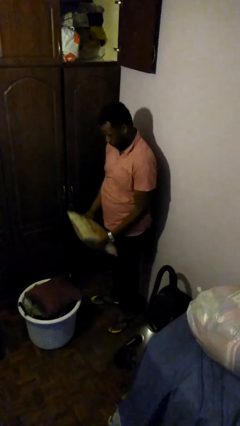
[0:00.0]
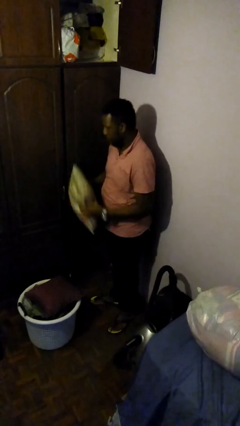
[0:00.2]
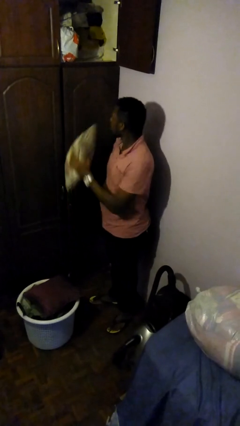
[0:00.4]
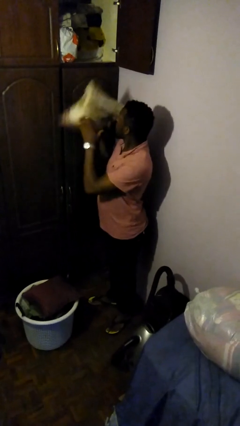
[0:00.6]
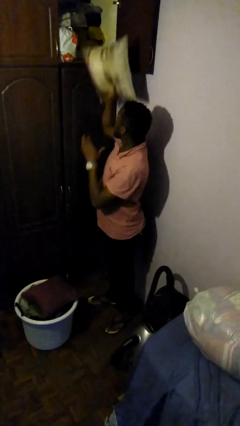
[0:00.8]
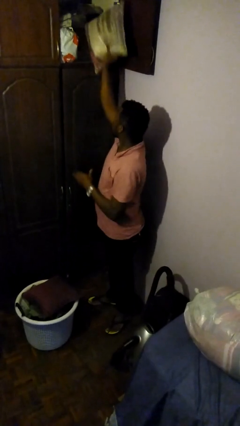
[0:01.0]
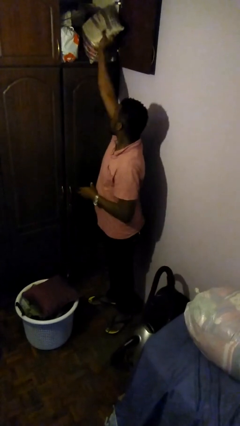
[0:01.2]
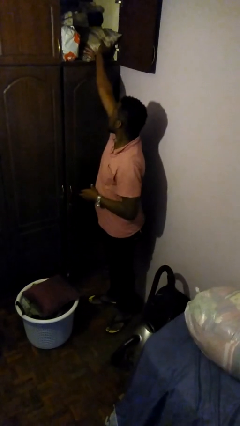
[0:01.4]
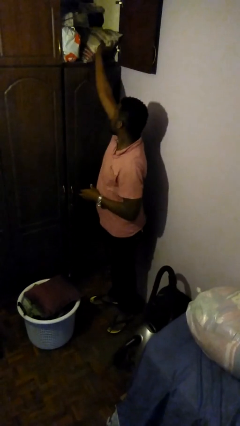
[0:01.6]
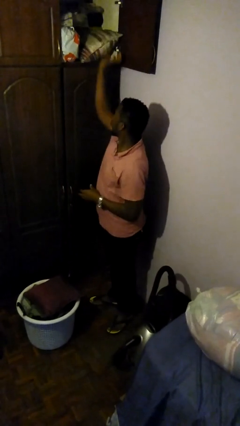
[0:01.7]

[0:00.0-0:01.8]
person puts down object on shelf

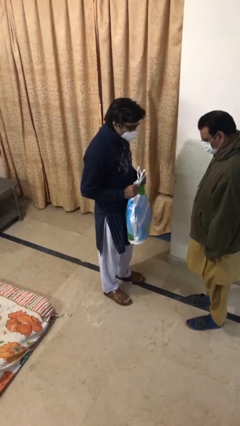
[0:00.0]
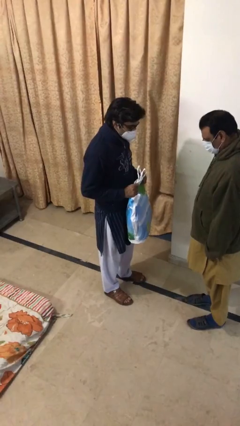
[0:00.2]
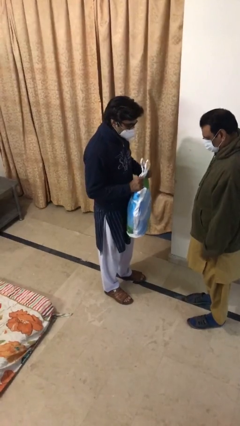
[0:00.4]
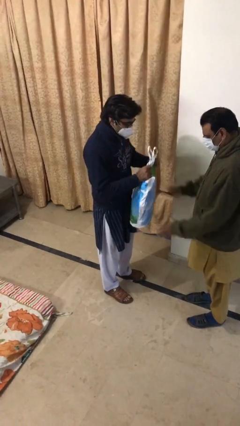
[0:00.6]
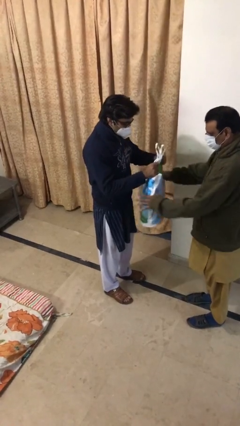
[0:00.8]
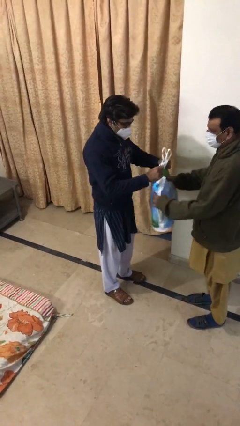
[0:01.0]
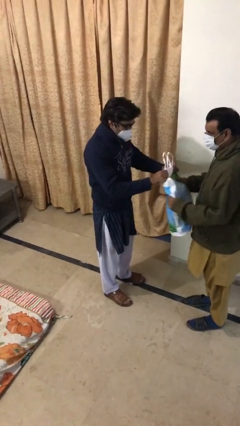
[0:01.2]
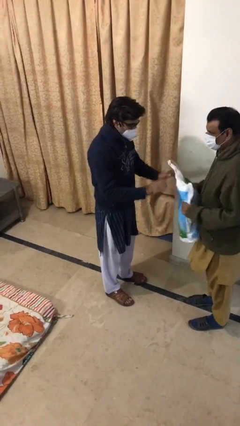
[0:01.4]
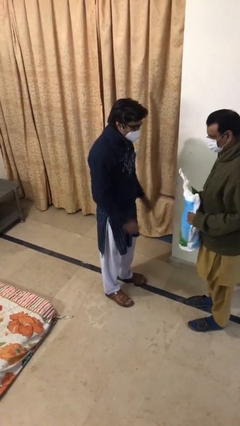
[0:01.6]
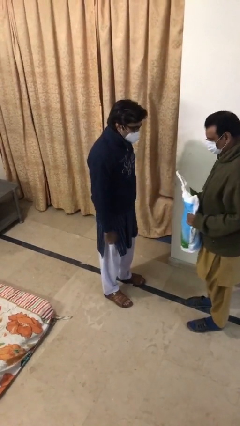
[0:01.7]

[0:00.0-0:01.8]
person transfers object to person

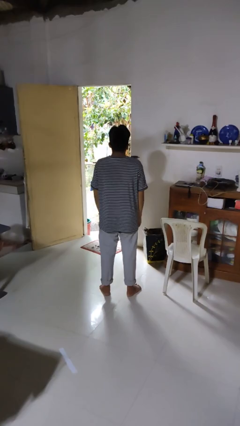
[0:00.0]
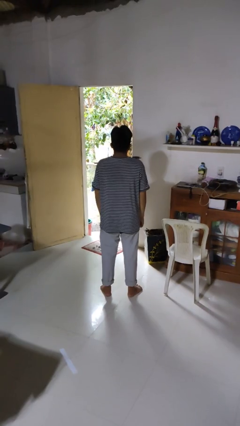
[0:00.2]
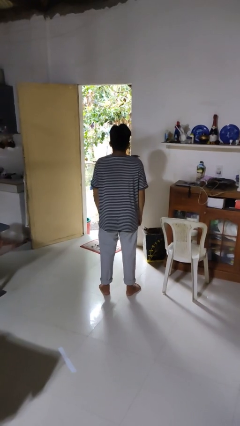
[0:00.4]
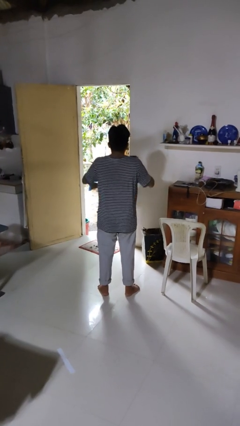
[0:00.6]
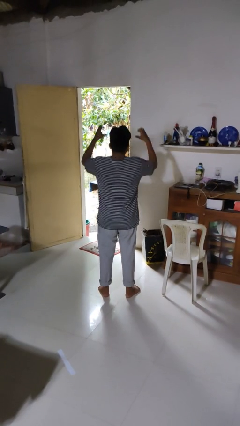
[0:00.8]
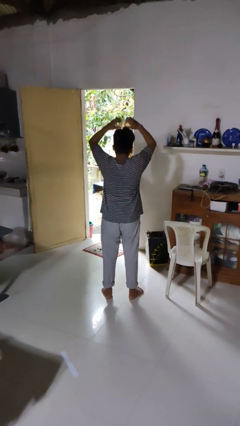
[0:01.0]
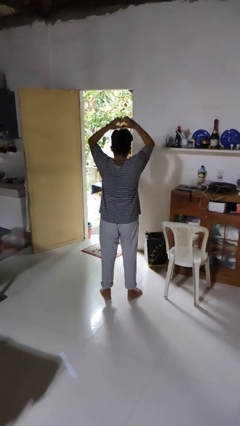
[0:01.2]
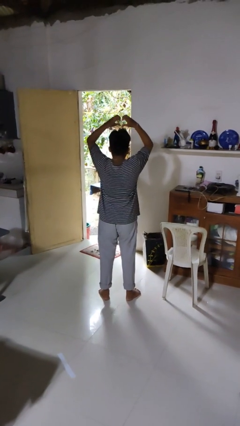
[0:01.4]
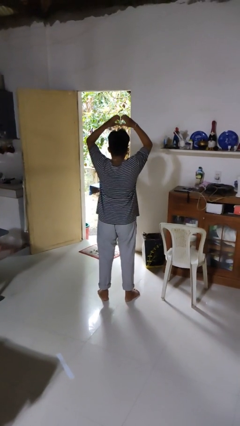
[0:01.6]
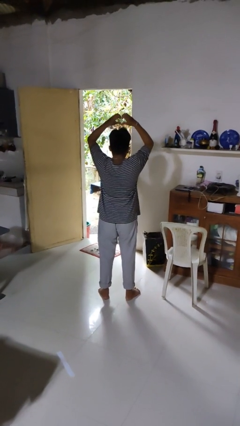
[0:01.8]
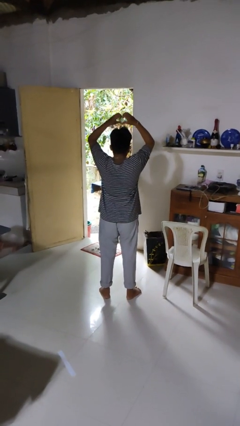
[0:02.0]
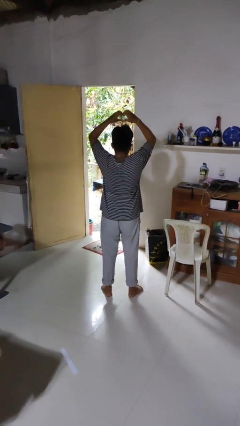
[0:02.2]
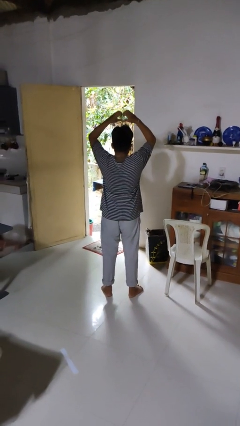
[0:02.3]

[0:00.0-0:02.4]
person gestures heart

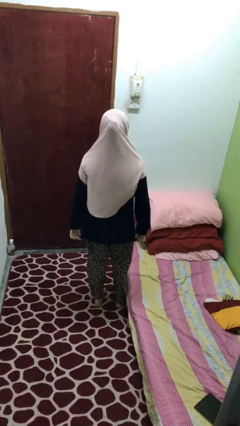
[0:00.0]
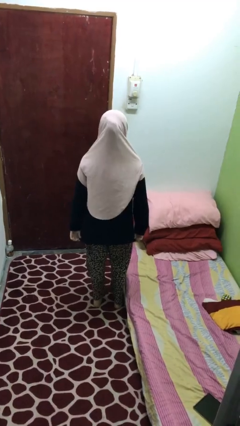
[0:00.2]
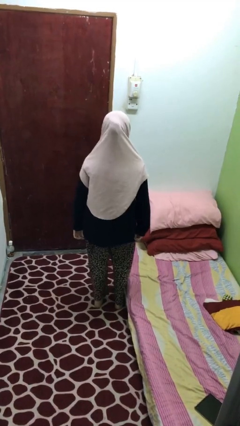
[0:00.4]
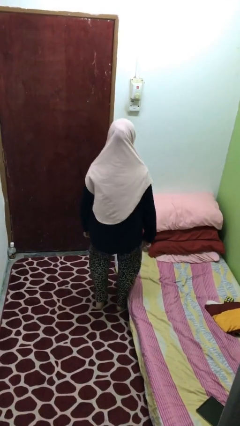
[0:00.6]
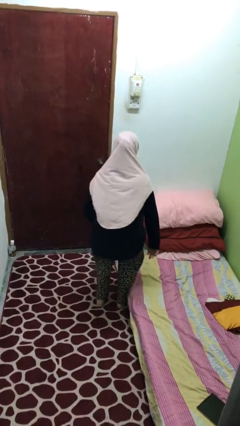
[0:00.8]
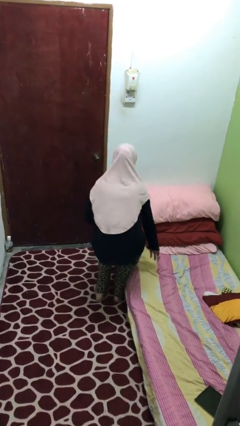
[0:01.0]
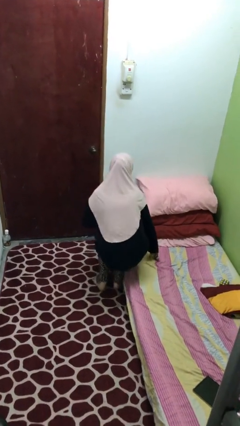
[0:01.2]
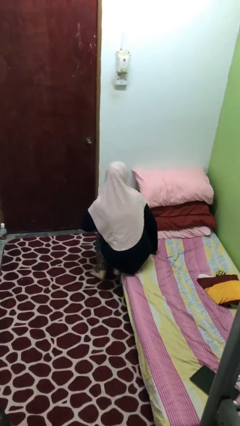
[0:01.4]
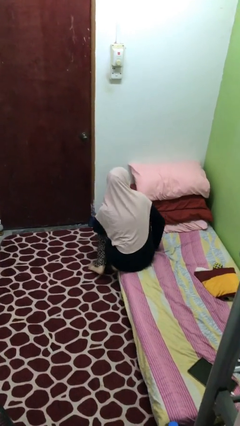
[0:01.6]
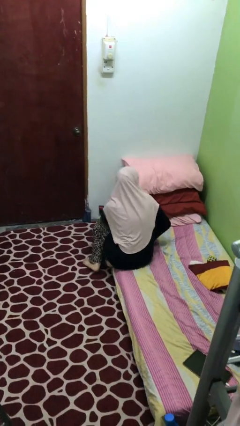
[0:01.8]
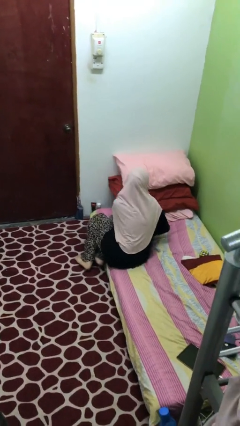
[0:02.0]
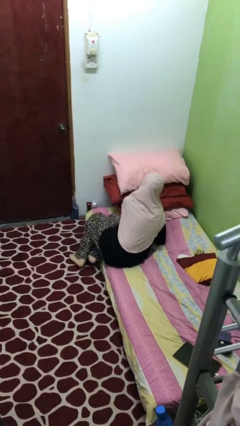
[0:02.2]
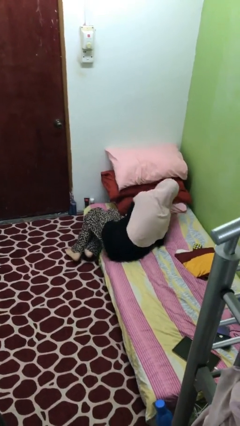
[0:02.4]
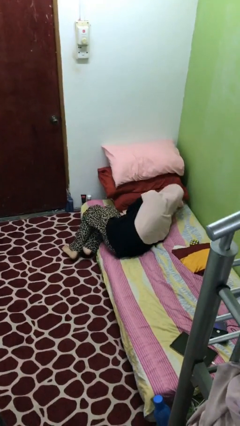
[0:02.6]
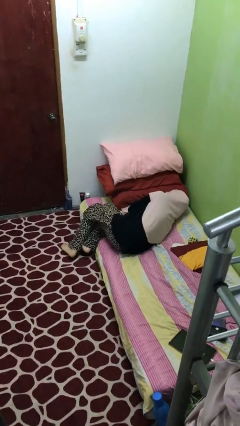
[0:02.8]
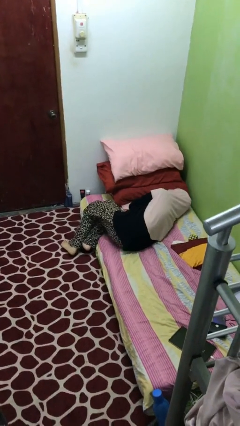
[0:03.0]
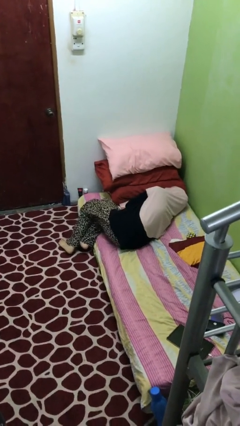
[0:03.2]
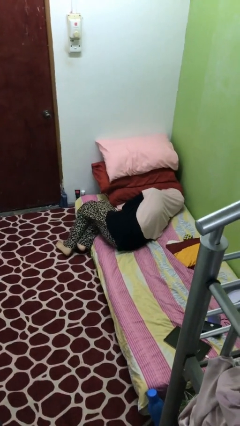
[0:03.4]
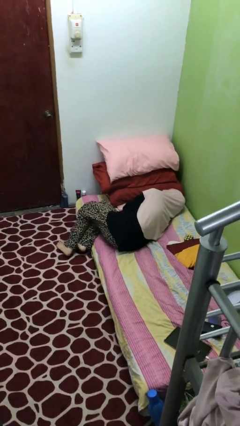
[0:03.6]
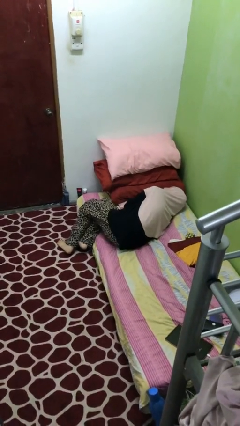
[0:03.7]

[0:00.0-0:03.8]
person lies down on bed

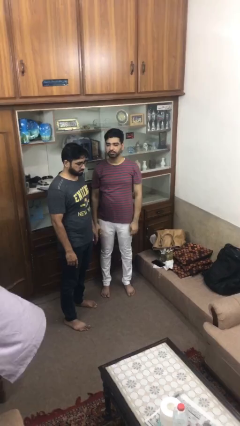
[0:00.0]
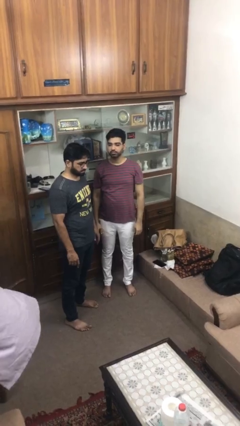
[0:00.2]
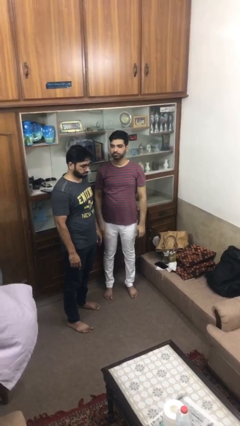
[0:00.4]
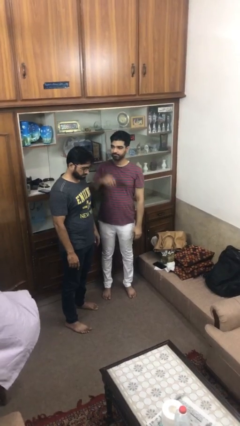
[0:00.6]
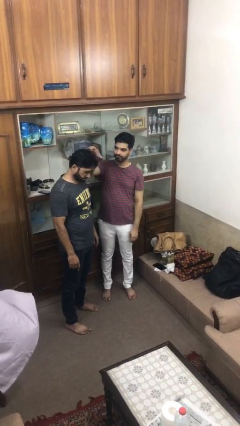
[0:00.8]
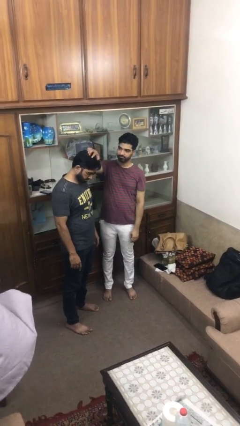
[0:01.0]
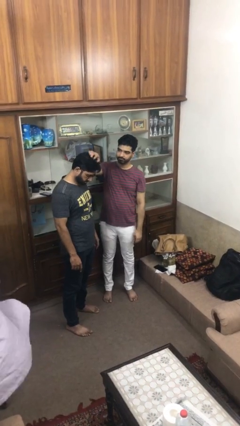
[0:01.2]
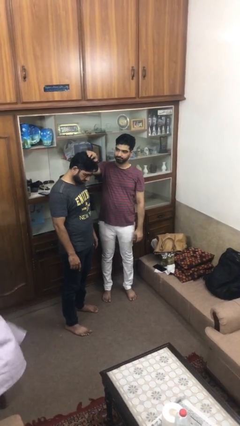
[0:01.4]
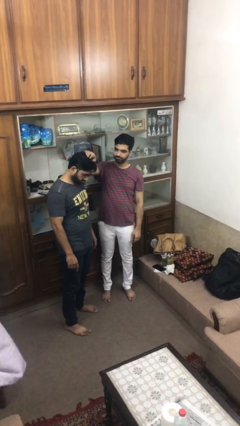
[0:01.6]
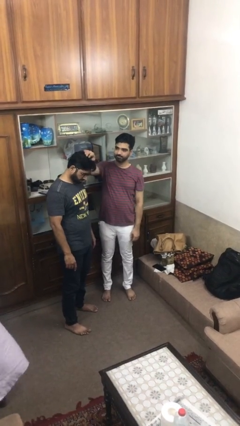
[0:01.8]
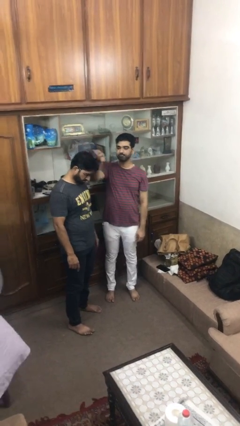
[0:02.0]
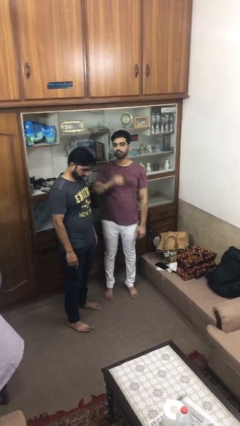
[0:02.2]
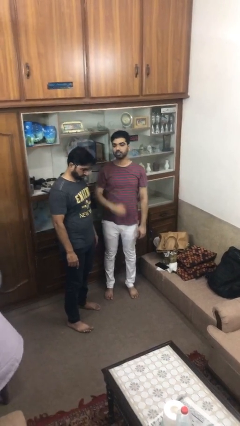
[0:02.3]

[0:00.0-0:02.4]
person grabs person by hair

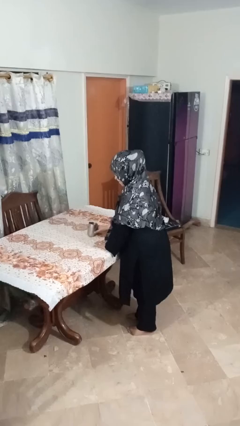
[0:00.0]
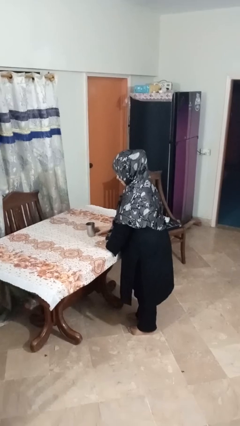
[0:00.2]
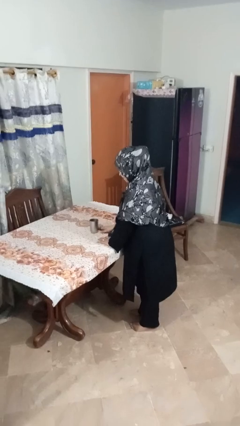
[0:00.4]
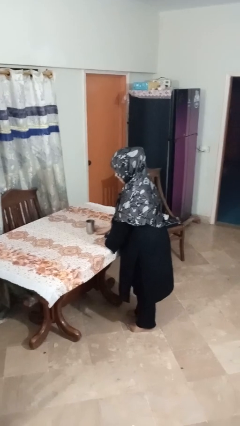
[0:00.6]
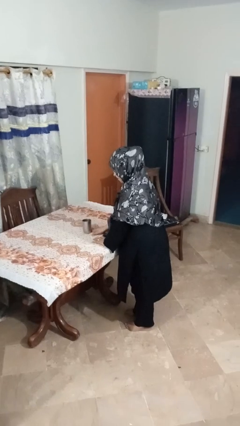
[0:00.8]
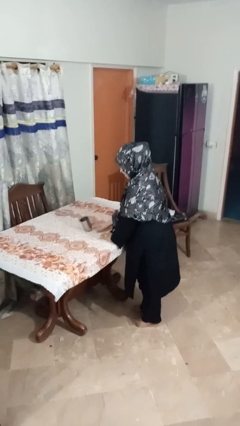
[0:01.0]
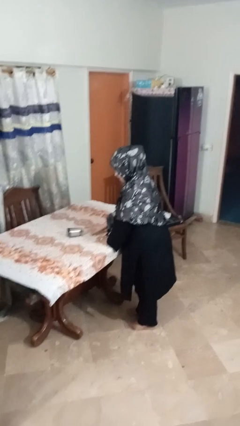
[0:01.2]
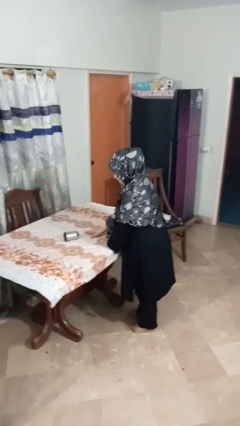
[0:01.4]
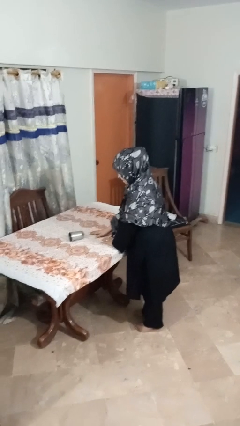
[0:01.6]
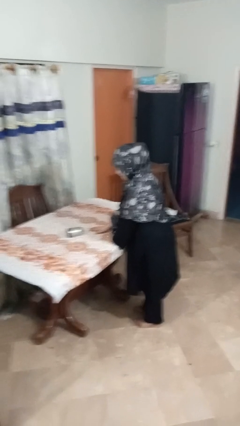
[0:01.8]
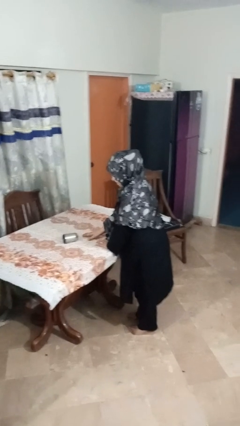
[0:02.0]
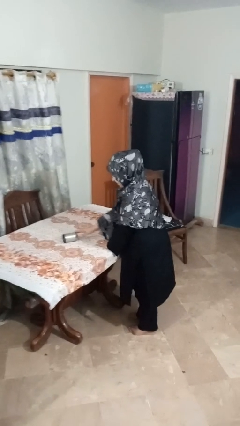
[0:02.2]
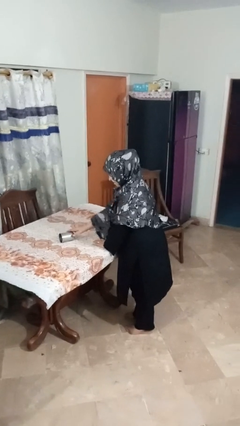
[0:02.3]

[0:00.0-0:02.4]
person sets upright glass

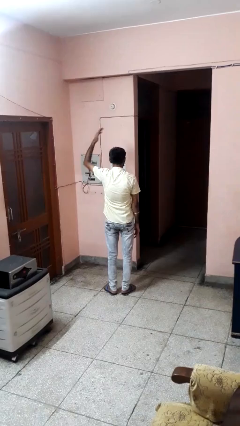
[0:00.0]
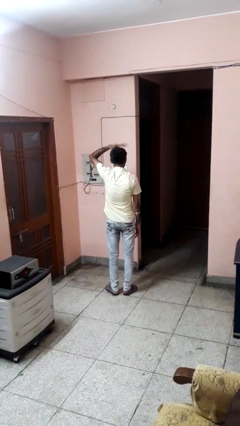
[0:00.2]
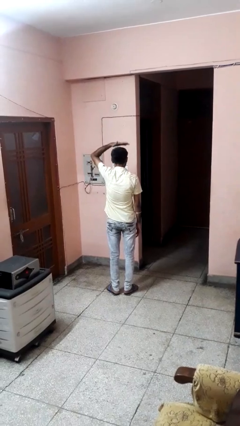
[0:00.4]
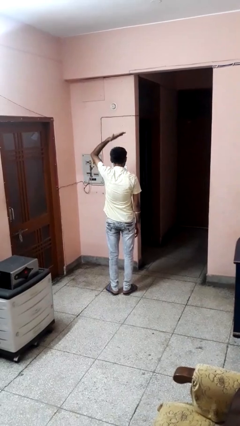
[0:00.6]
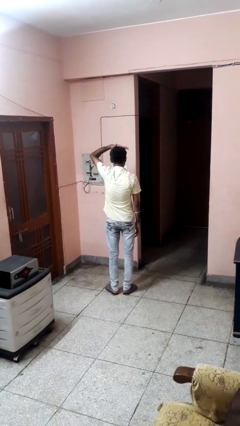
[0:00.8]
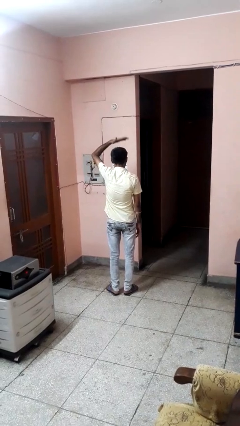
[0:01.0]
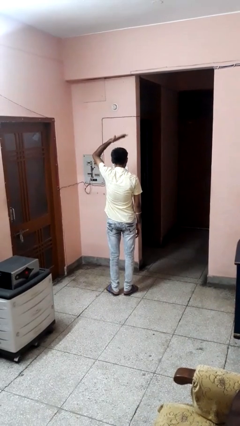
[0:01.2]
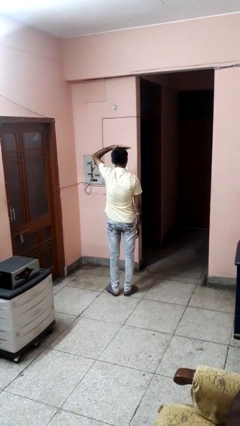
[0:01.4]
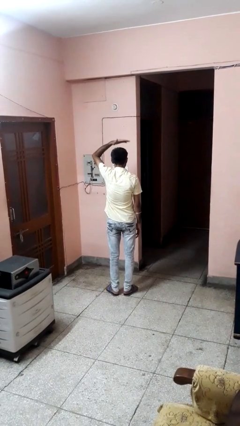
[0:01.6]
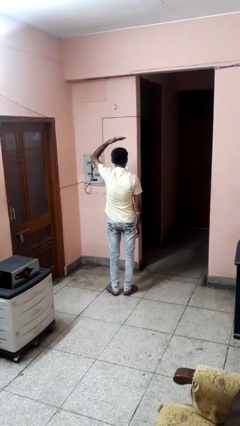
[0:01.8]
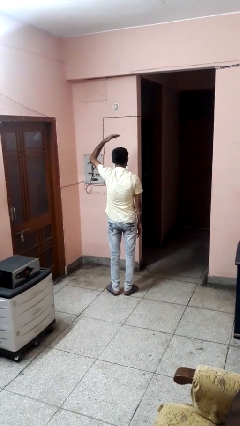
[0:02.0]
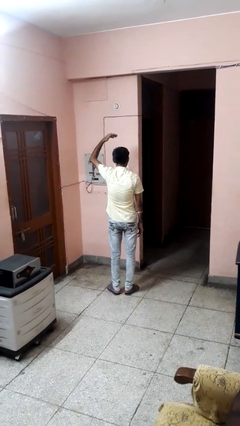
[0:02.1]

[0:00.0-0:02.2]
person pats head
